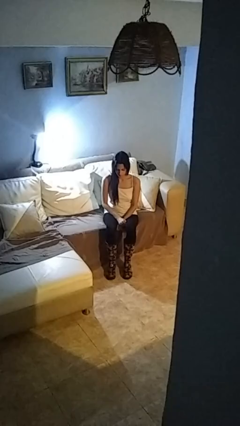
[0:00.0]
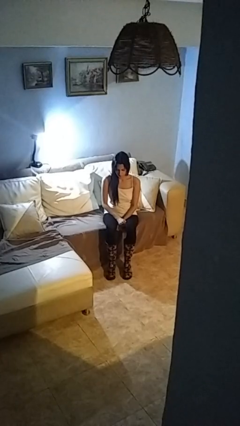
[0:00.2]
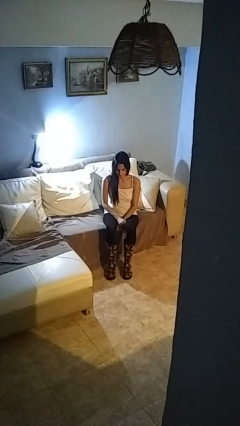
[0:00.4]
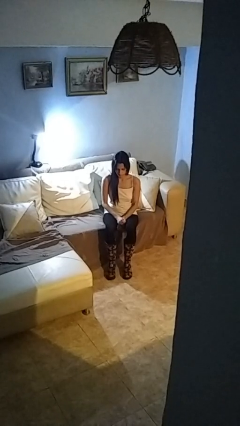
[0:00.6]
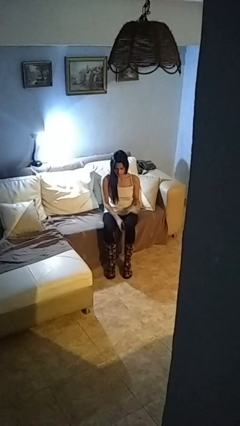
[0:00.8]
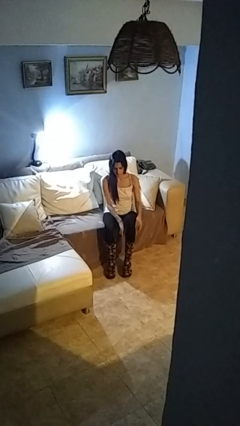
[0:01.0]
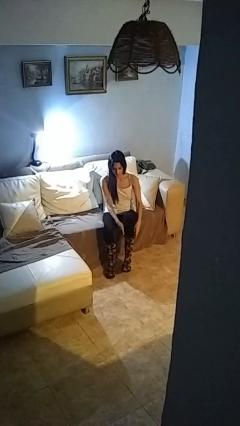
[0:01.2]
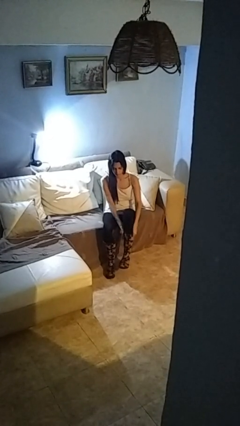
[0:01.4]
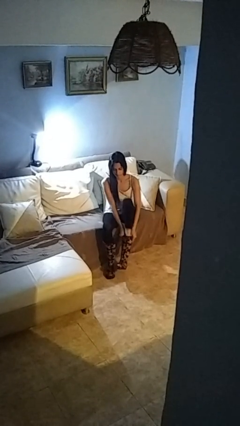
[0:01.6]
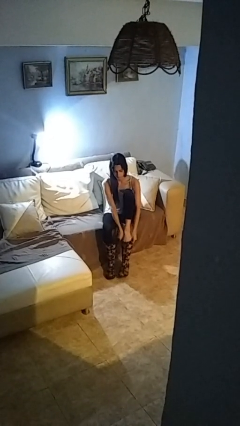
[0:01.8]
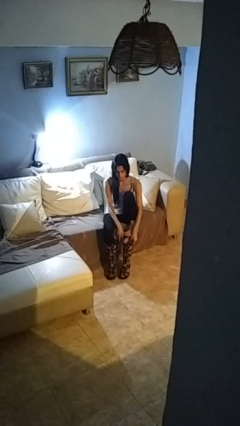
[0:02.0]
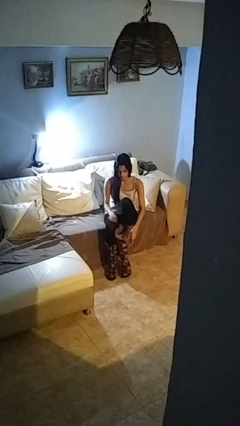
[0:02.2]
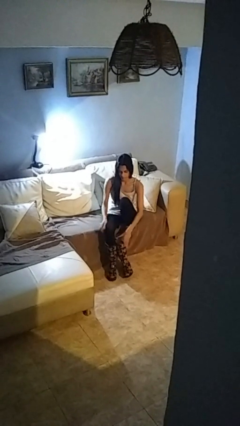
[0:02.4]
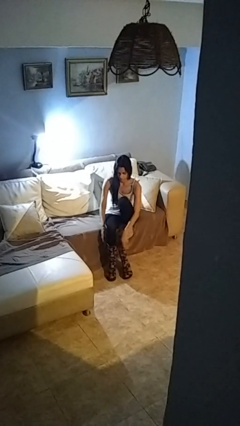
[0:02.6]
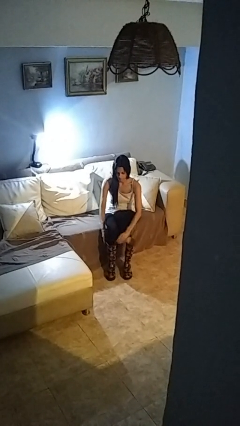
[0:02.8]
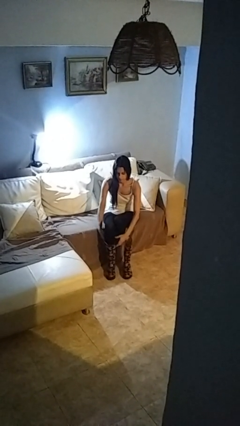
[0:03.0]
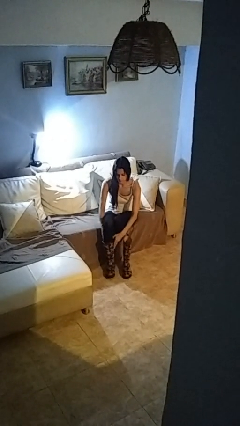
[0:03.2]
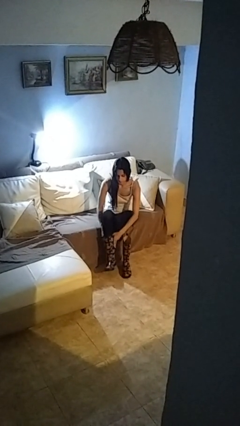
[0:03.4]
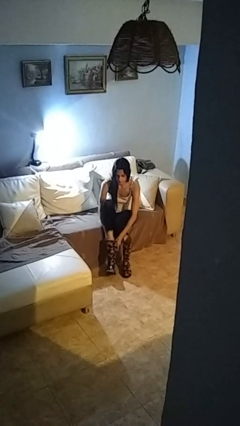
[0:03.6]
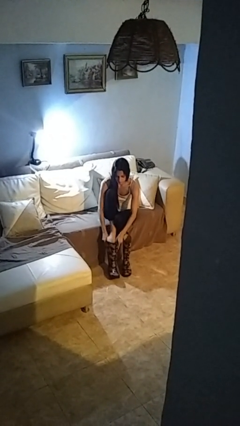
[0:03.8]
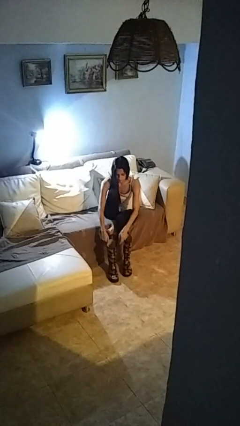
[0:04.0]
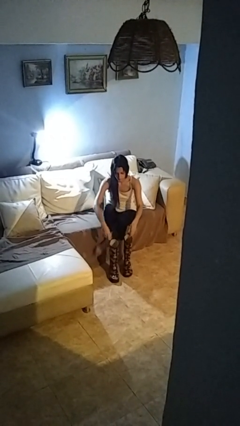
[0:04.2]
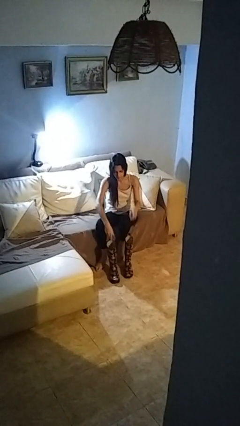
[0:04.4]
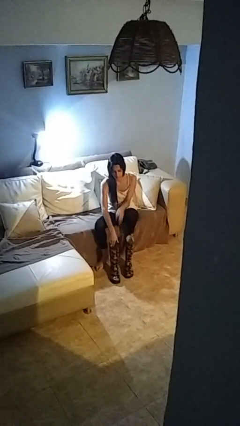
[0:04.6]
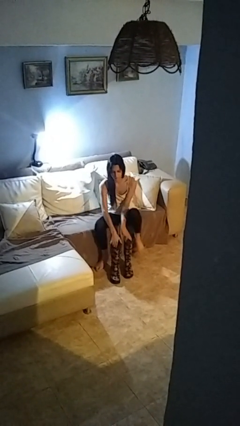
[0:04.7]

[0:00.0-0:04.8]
person takes off boots

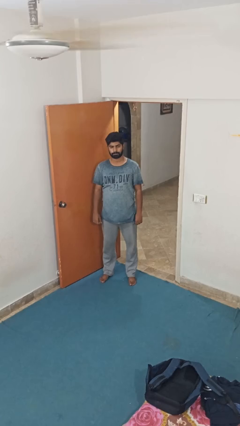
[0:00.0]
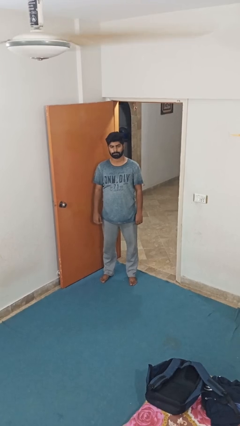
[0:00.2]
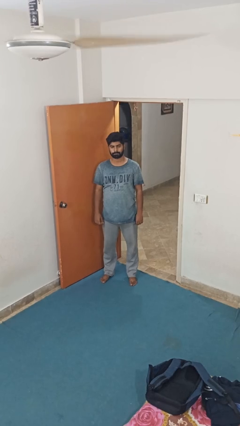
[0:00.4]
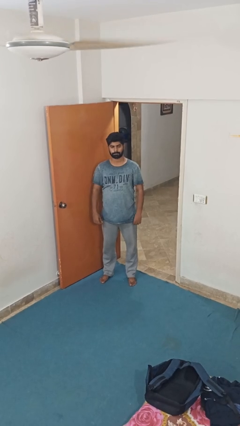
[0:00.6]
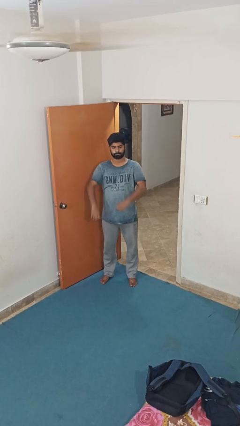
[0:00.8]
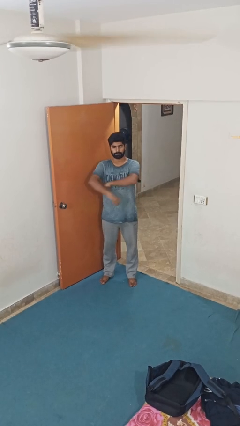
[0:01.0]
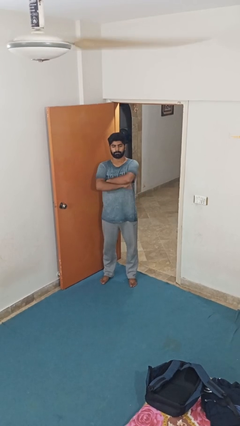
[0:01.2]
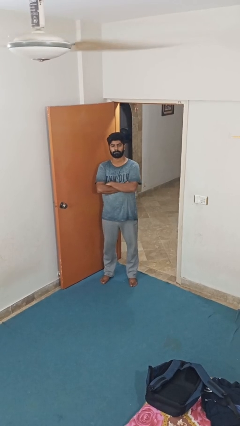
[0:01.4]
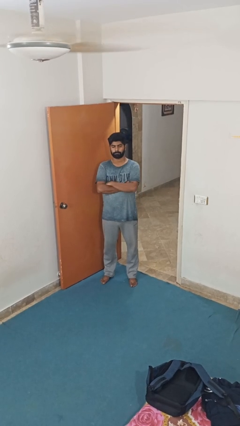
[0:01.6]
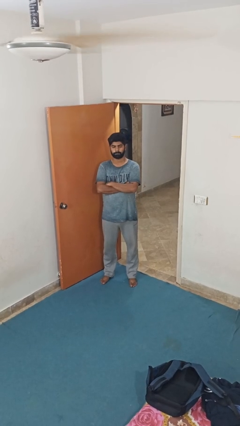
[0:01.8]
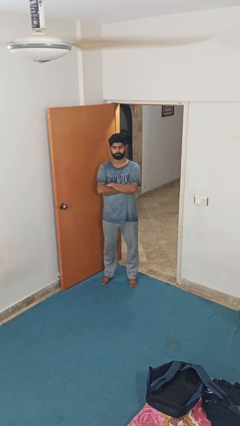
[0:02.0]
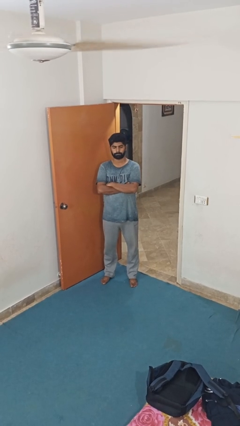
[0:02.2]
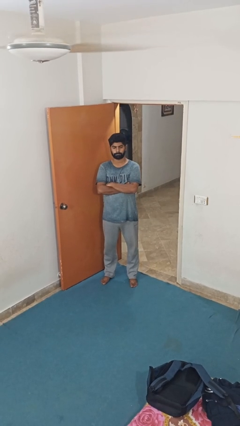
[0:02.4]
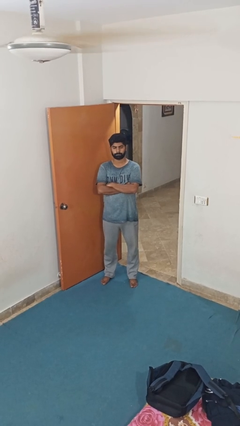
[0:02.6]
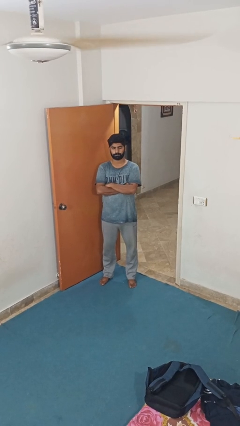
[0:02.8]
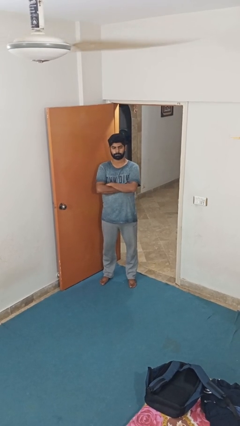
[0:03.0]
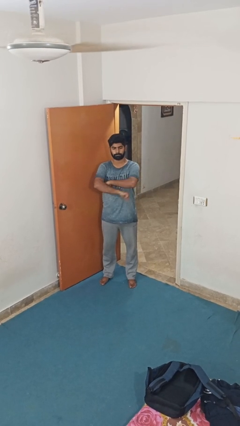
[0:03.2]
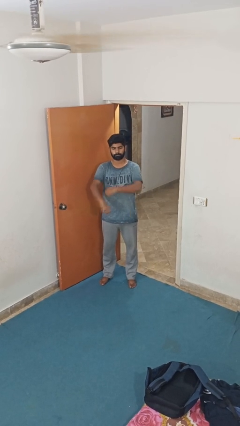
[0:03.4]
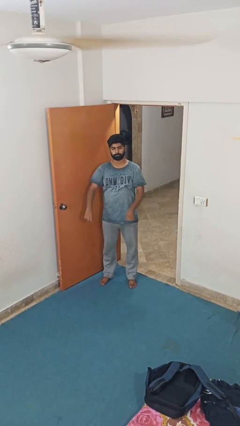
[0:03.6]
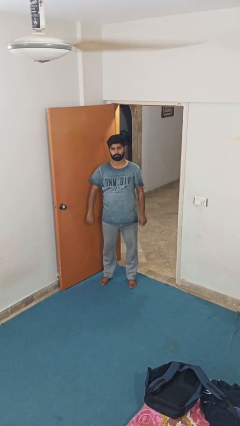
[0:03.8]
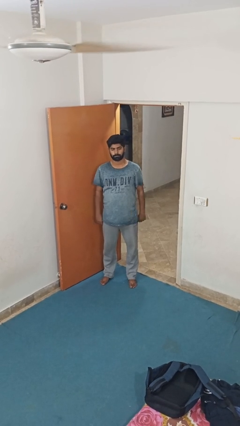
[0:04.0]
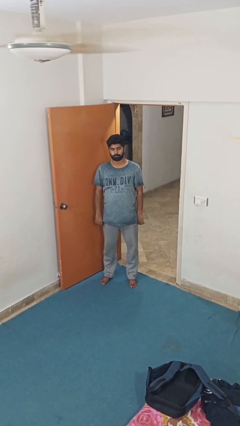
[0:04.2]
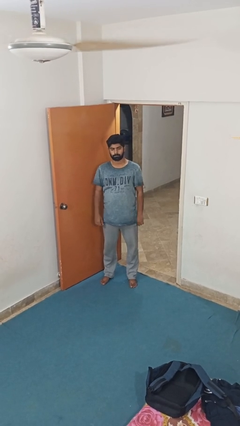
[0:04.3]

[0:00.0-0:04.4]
person crosses arms

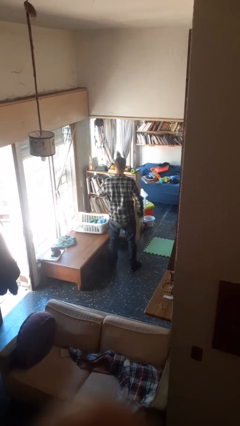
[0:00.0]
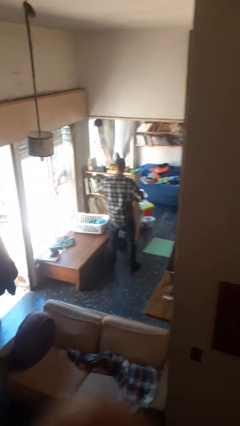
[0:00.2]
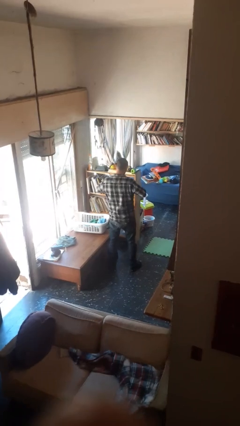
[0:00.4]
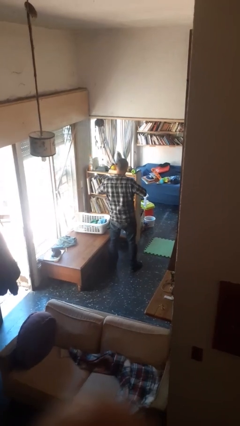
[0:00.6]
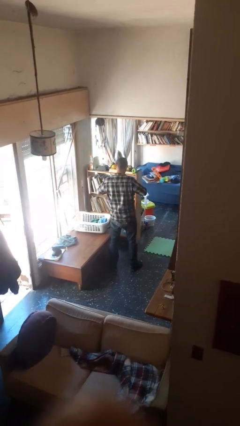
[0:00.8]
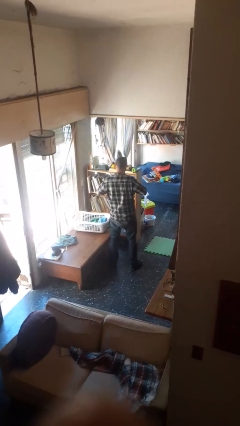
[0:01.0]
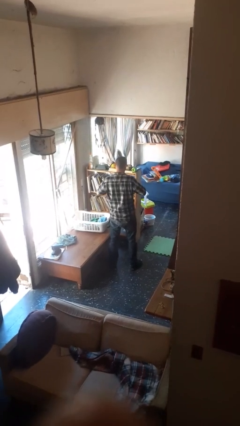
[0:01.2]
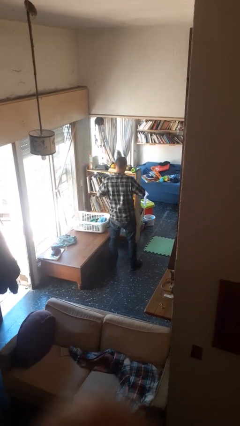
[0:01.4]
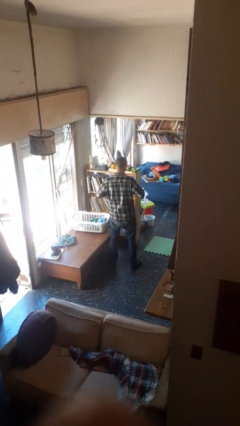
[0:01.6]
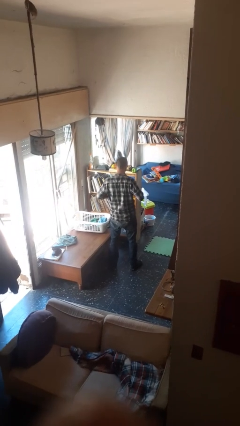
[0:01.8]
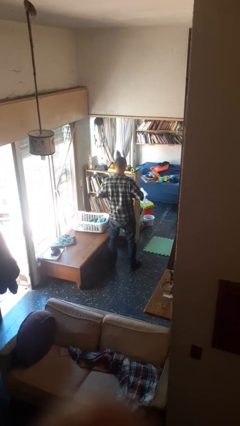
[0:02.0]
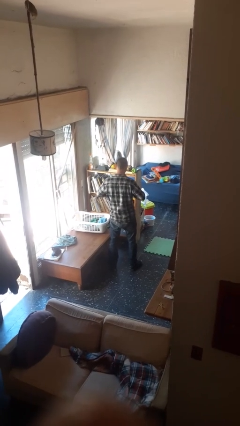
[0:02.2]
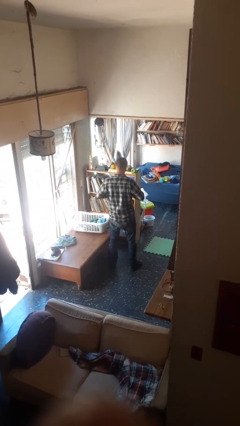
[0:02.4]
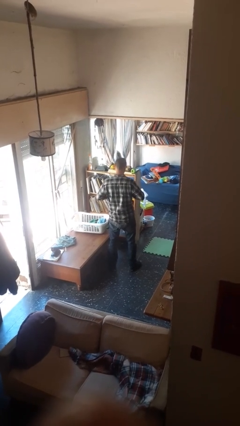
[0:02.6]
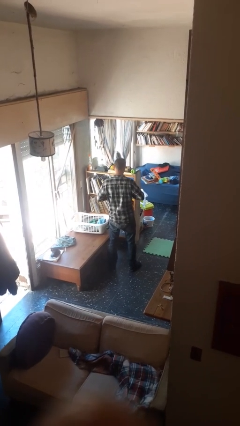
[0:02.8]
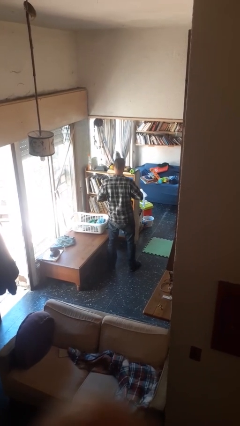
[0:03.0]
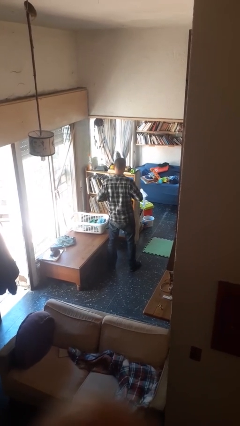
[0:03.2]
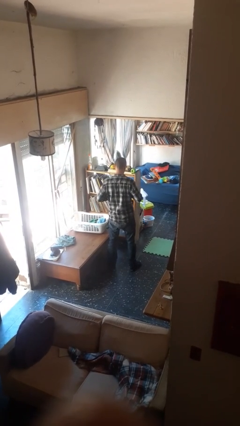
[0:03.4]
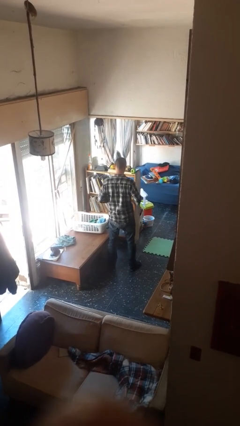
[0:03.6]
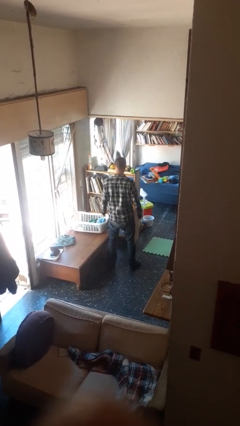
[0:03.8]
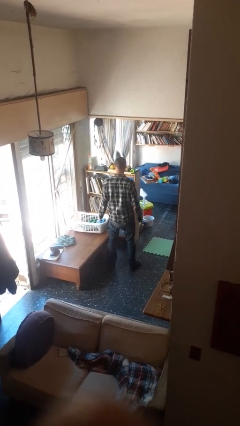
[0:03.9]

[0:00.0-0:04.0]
person unbuttons shirt

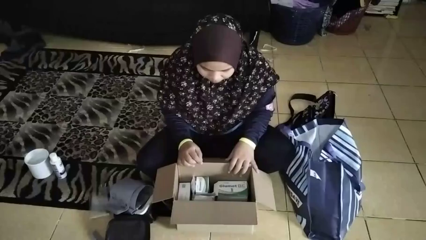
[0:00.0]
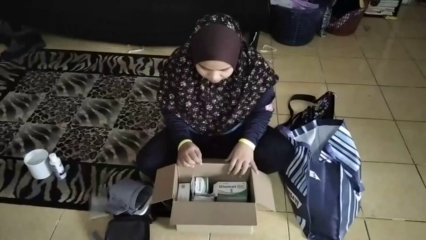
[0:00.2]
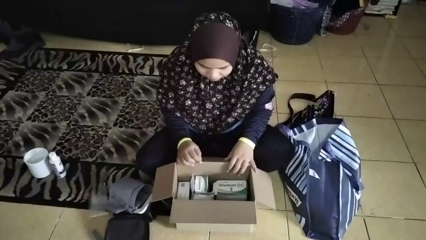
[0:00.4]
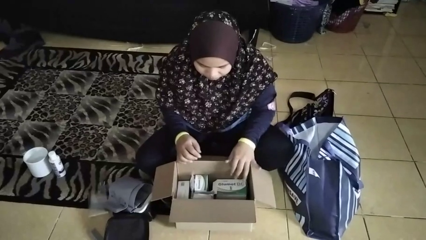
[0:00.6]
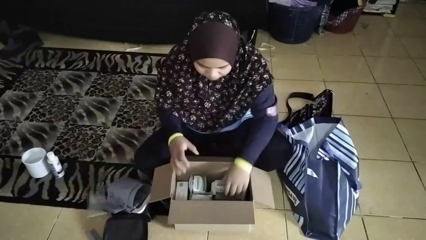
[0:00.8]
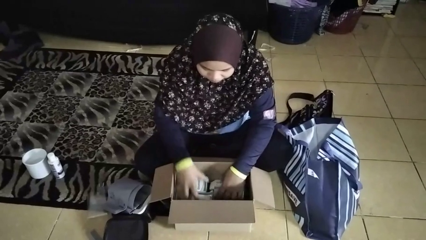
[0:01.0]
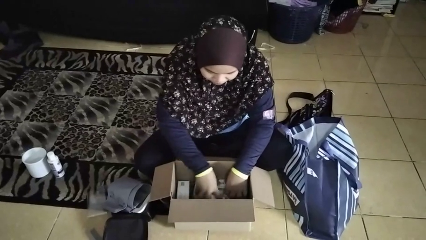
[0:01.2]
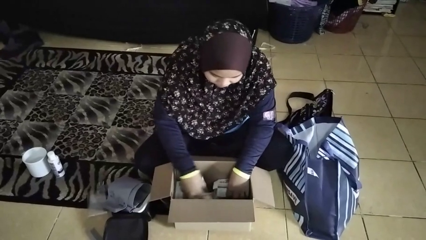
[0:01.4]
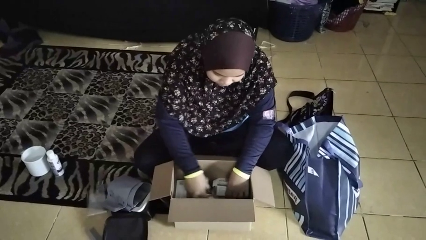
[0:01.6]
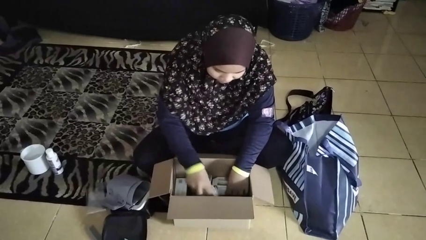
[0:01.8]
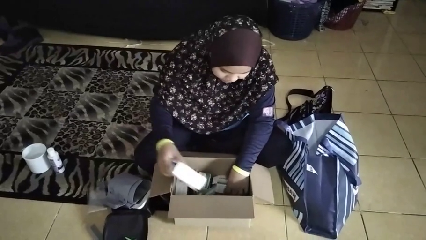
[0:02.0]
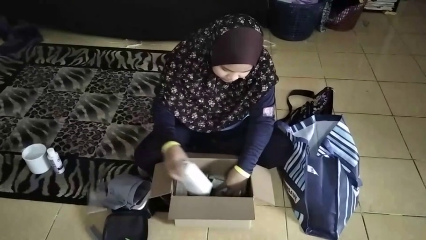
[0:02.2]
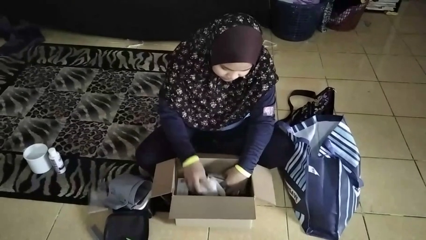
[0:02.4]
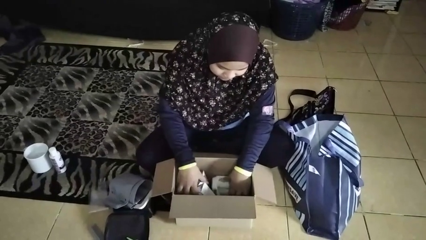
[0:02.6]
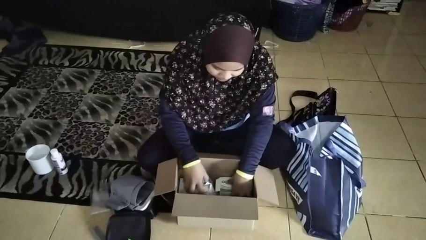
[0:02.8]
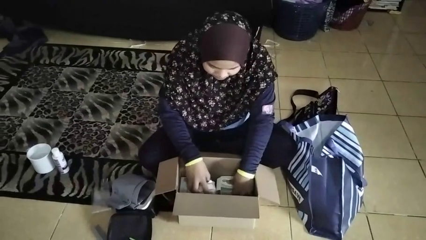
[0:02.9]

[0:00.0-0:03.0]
person searches in box

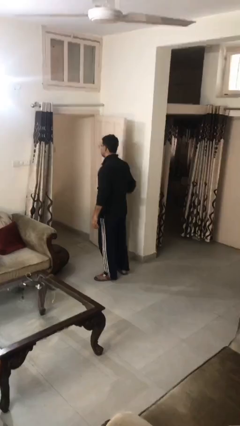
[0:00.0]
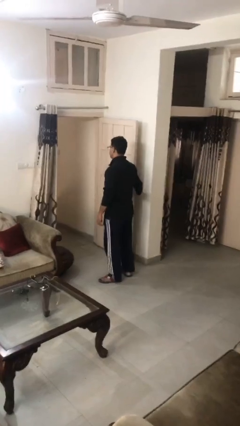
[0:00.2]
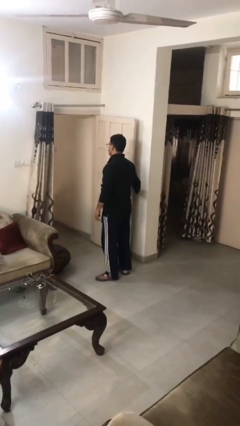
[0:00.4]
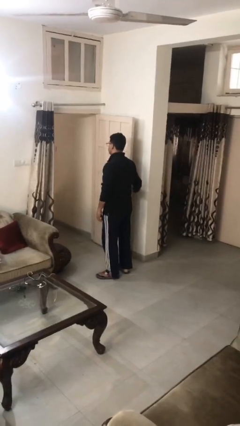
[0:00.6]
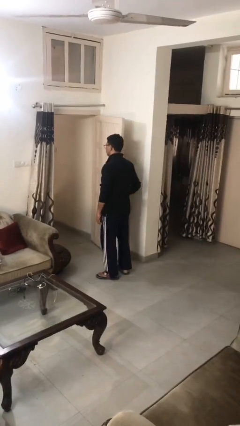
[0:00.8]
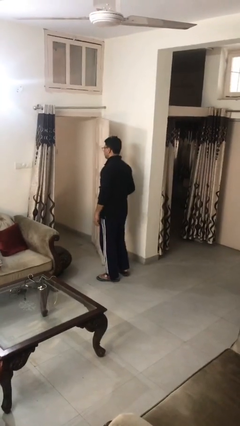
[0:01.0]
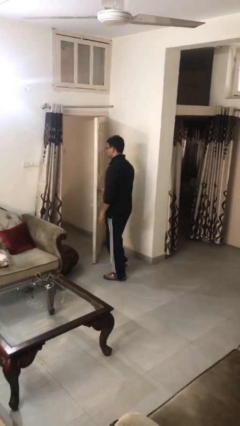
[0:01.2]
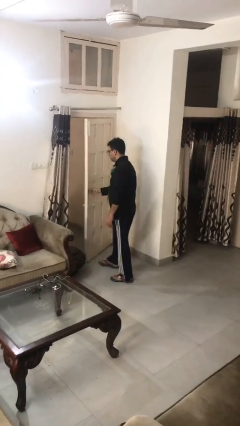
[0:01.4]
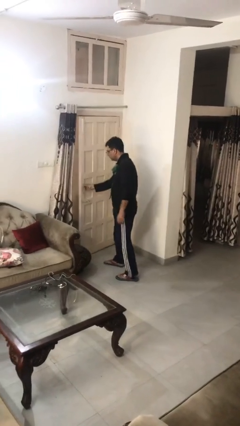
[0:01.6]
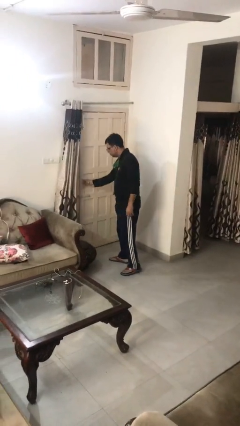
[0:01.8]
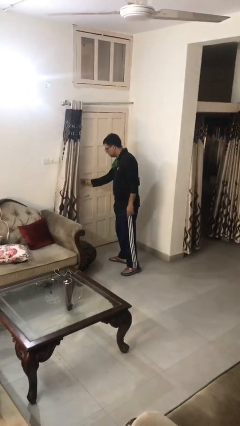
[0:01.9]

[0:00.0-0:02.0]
person closes facility door
